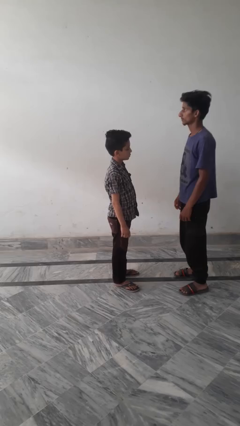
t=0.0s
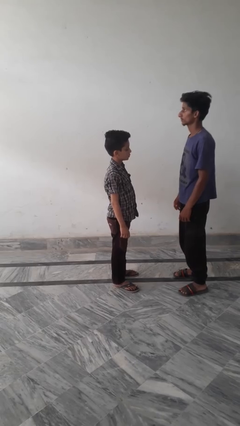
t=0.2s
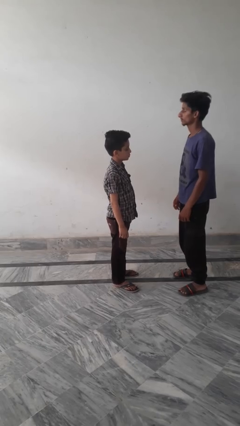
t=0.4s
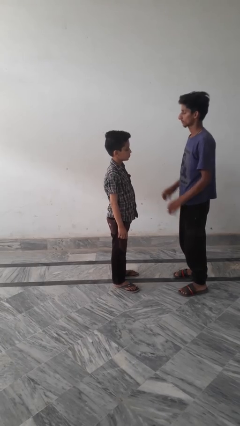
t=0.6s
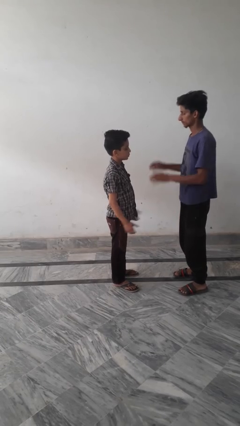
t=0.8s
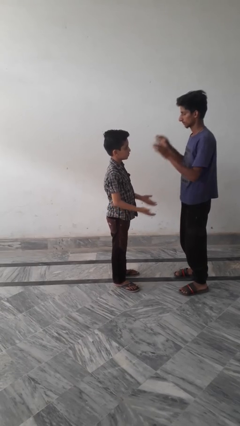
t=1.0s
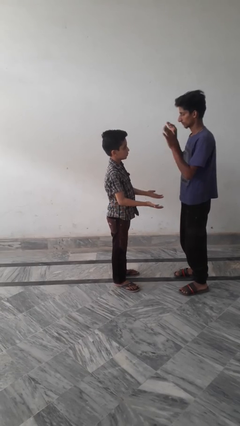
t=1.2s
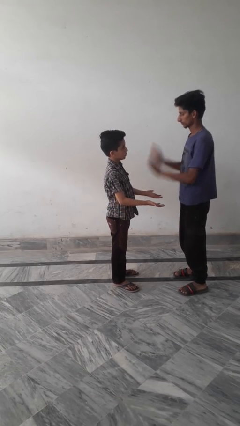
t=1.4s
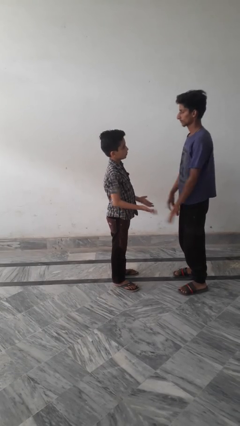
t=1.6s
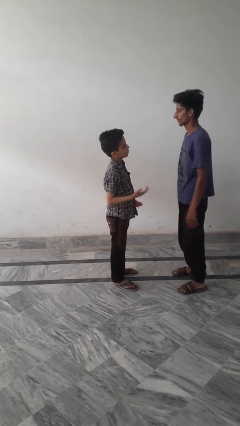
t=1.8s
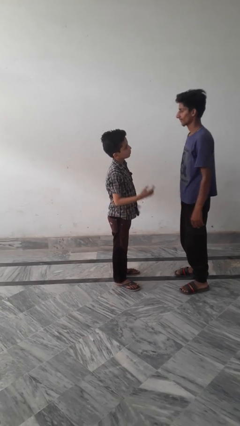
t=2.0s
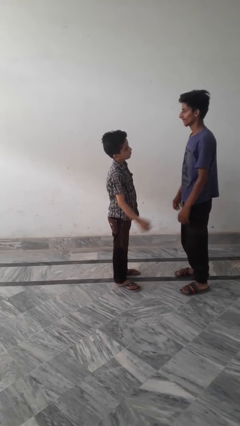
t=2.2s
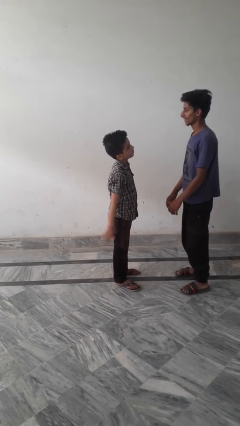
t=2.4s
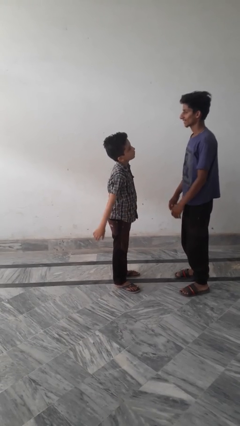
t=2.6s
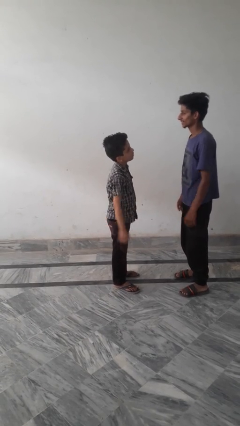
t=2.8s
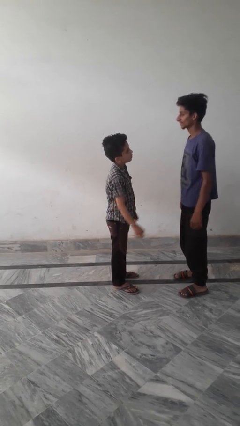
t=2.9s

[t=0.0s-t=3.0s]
person highfives hand

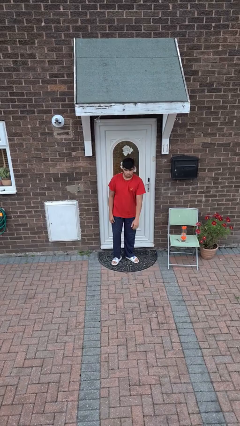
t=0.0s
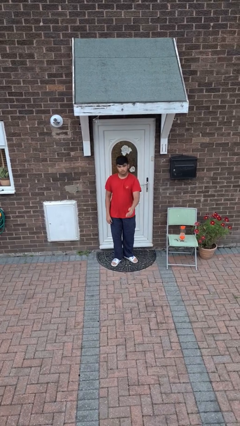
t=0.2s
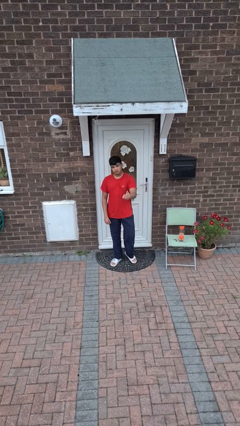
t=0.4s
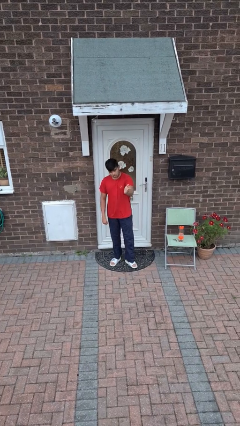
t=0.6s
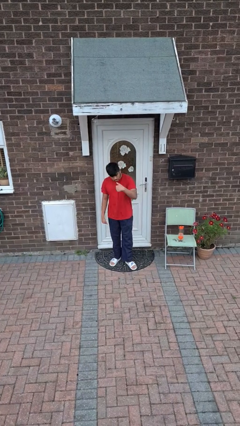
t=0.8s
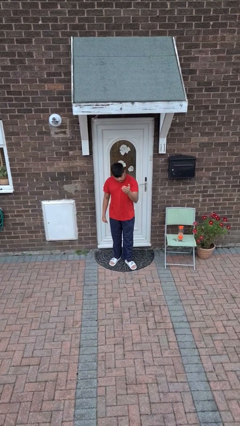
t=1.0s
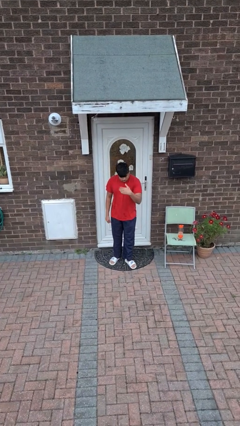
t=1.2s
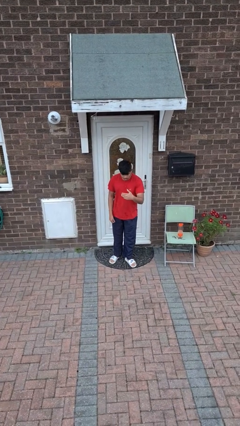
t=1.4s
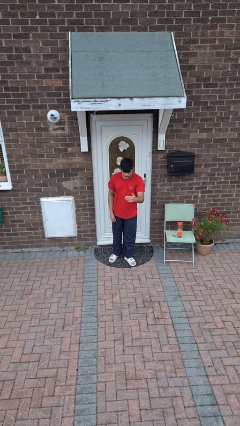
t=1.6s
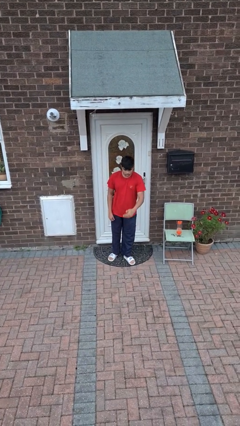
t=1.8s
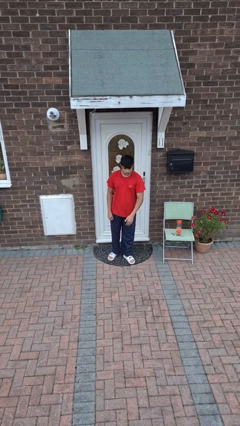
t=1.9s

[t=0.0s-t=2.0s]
person gestures come here

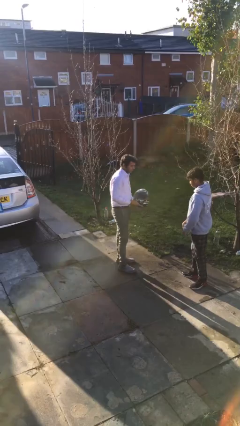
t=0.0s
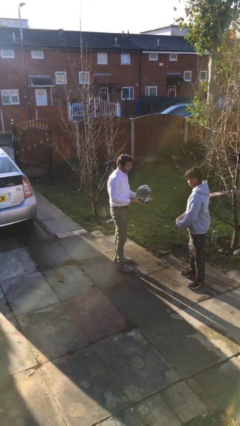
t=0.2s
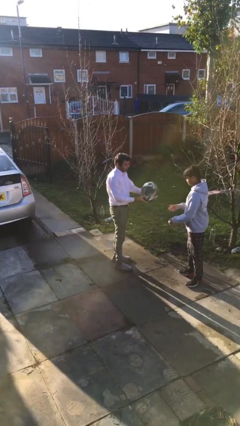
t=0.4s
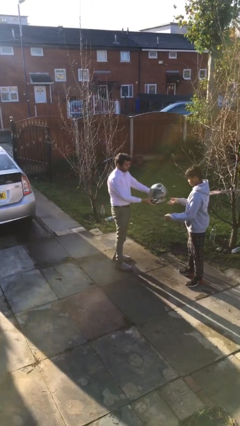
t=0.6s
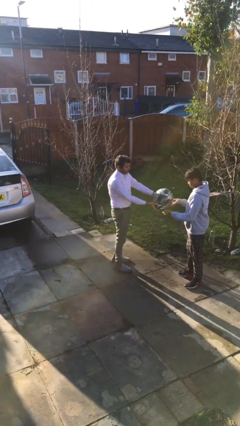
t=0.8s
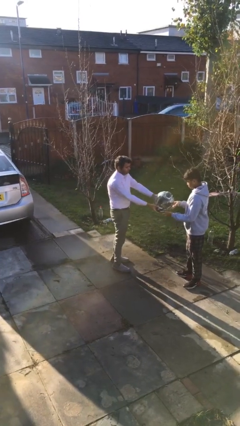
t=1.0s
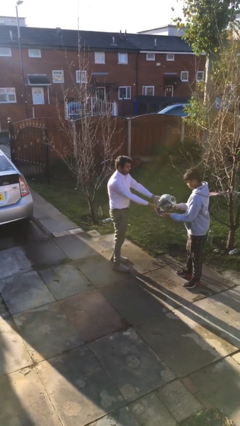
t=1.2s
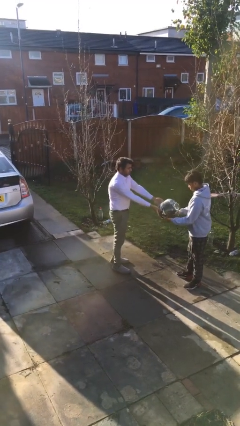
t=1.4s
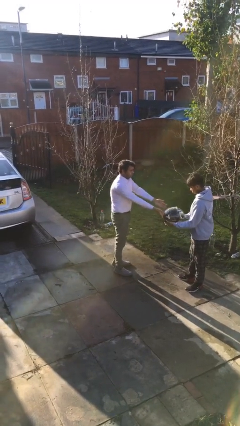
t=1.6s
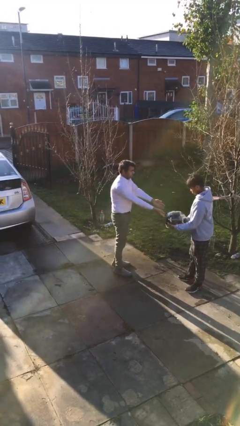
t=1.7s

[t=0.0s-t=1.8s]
person transfers object to person

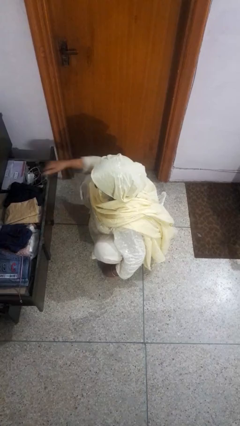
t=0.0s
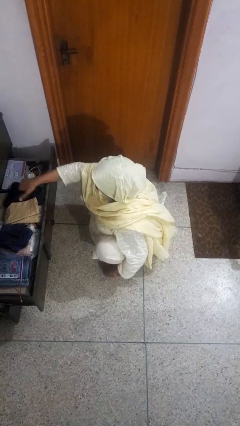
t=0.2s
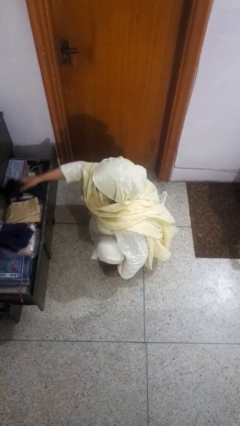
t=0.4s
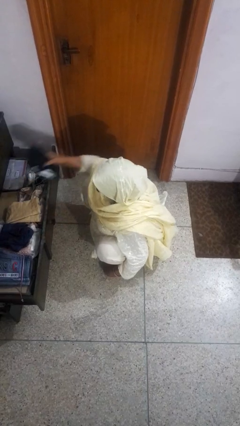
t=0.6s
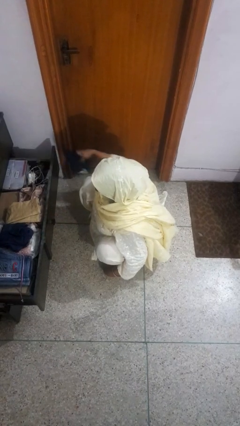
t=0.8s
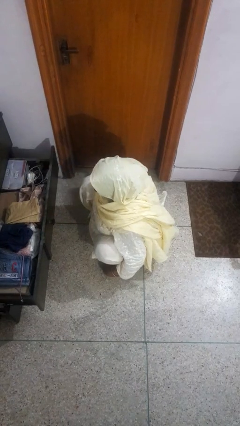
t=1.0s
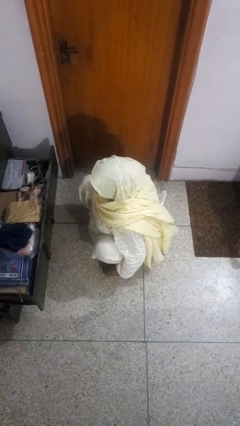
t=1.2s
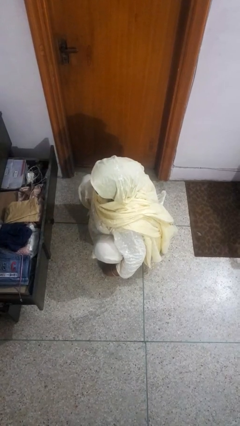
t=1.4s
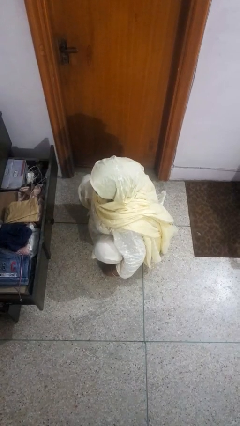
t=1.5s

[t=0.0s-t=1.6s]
person takes clothes from dresser

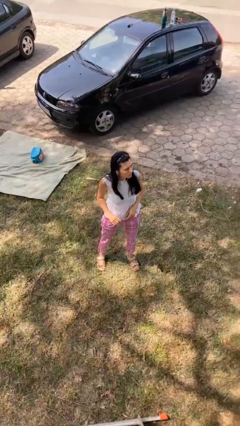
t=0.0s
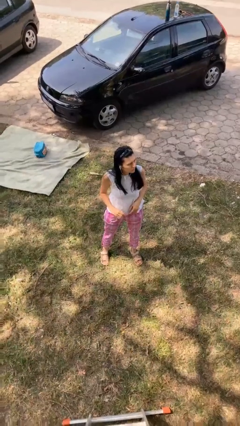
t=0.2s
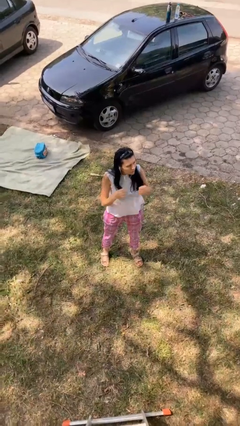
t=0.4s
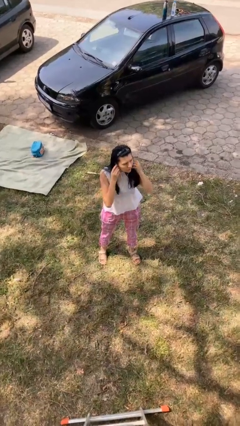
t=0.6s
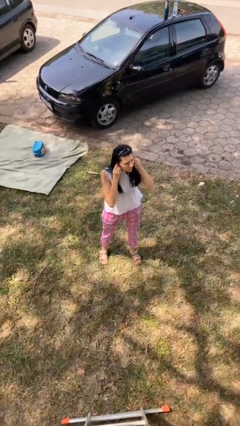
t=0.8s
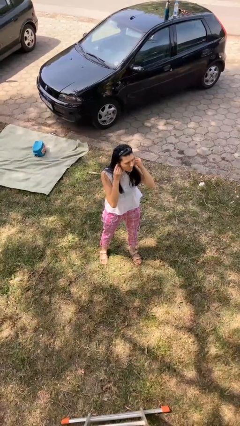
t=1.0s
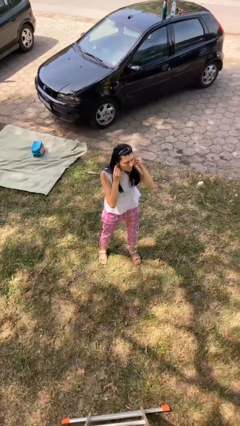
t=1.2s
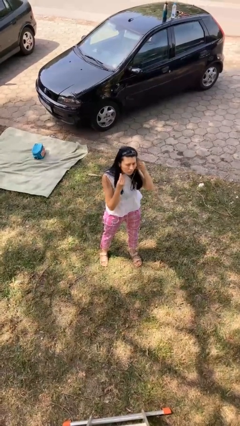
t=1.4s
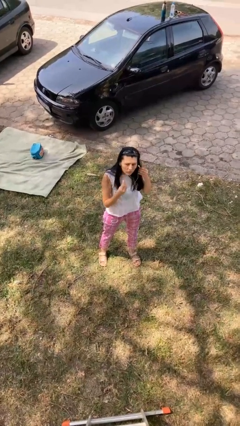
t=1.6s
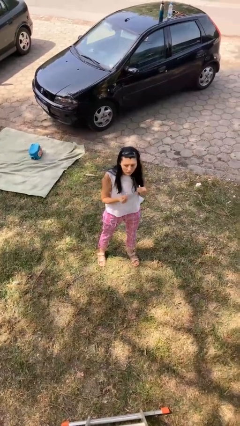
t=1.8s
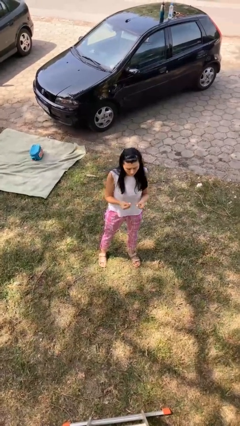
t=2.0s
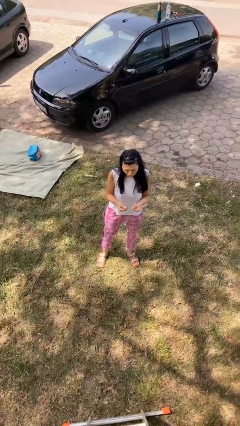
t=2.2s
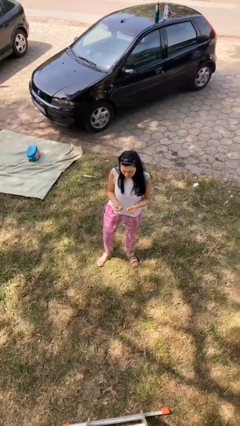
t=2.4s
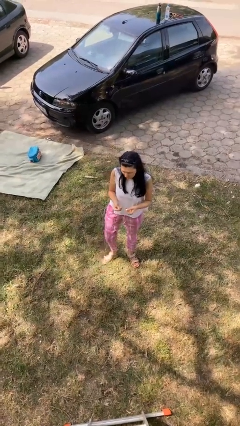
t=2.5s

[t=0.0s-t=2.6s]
person takes off headphones

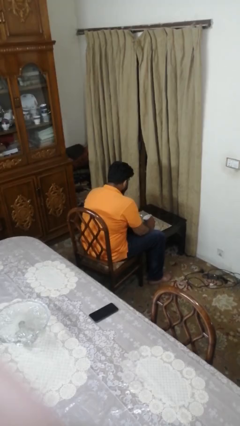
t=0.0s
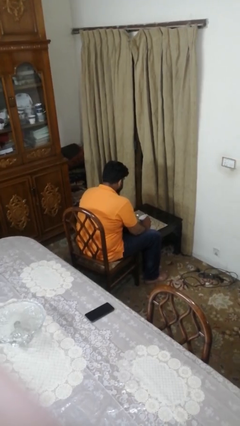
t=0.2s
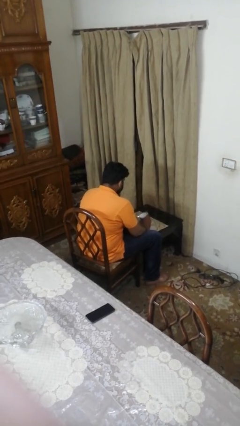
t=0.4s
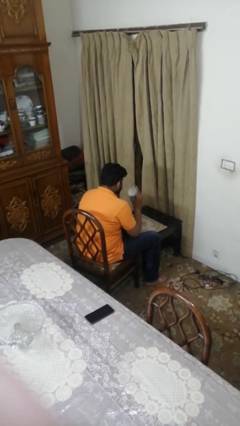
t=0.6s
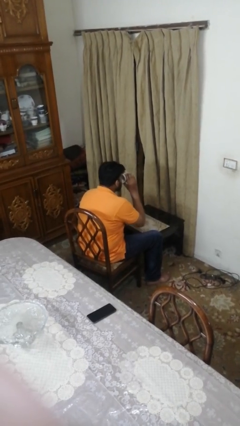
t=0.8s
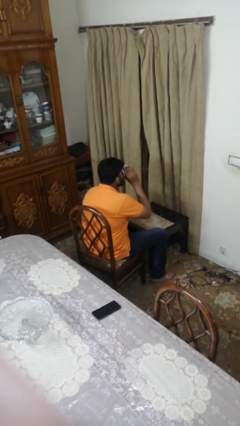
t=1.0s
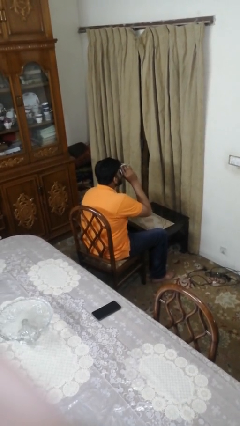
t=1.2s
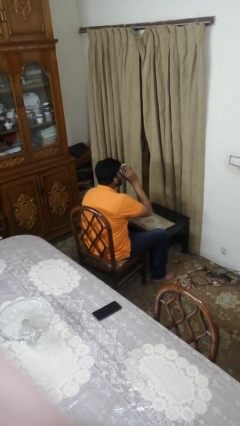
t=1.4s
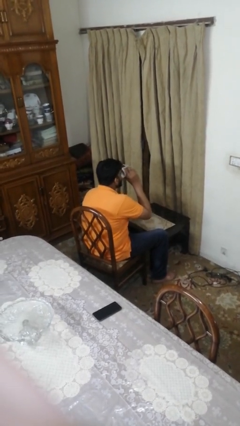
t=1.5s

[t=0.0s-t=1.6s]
person drinks from mug

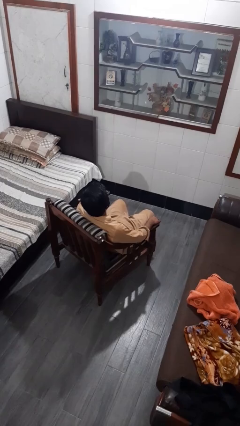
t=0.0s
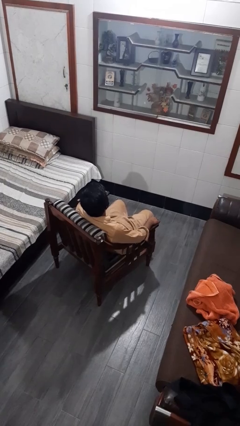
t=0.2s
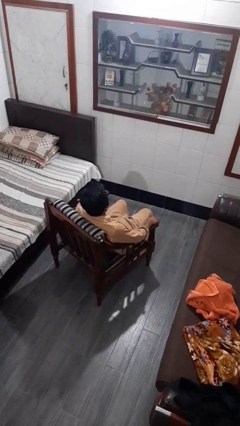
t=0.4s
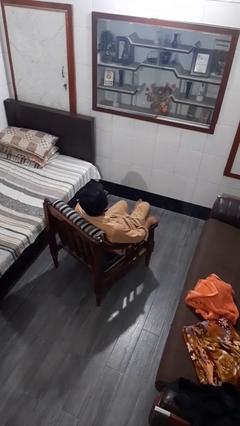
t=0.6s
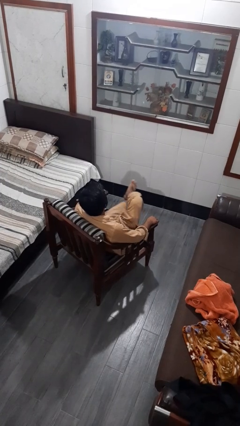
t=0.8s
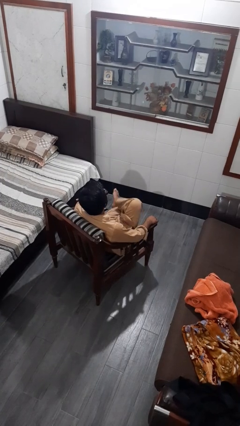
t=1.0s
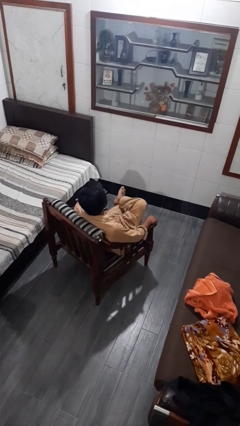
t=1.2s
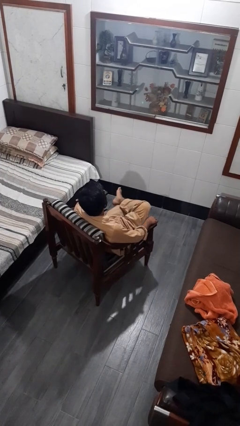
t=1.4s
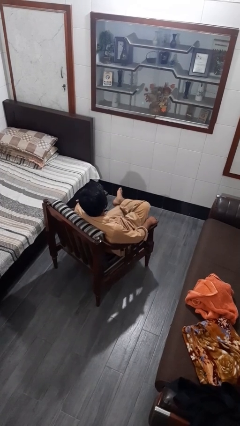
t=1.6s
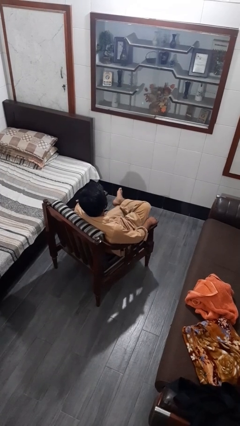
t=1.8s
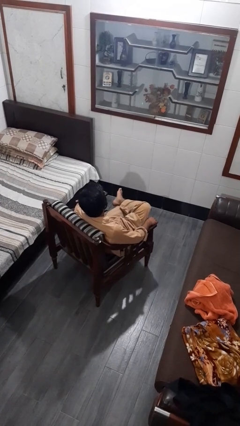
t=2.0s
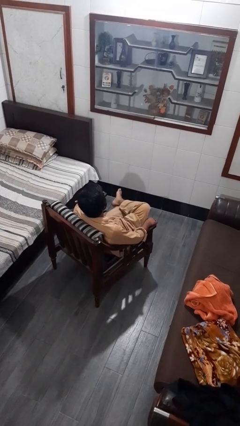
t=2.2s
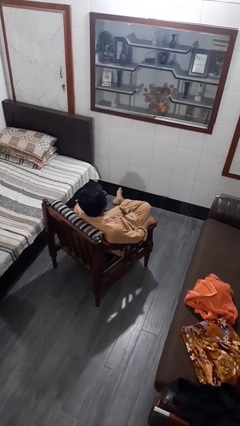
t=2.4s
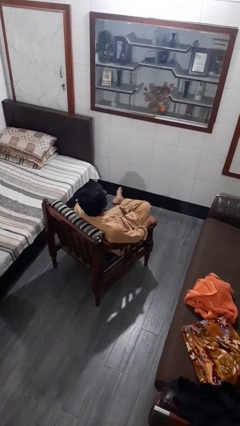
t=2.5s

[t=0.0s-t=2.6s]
person crosses legs

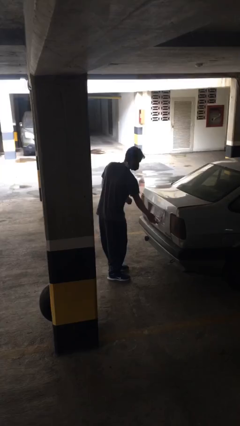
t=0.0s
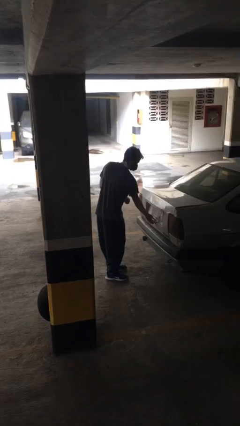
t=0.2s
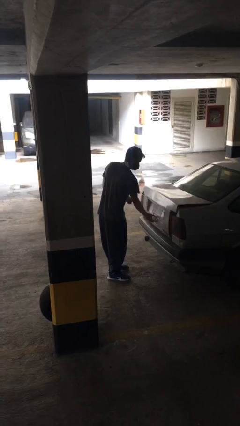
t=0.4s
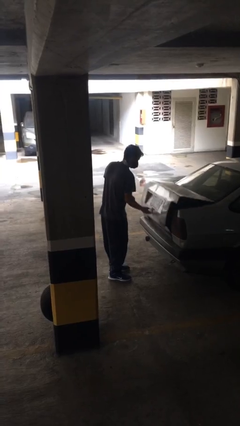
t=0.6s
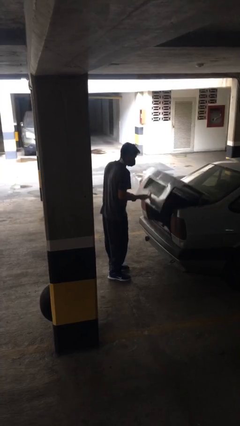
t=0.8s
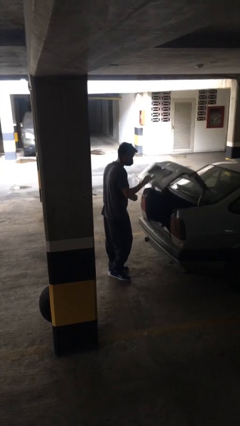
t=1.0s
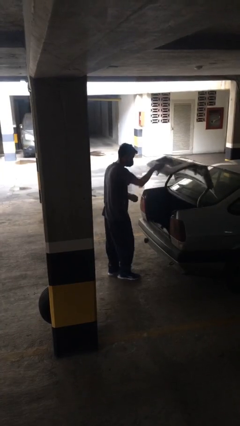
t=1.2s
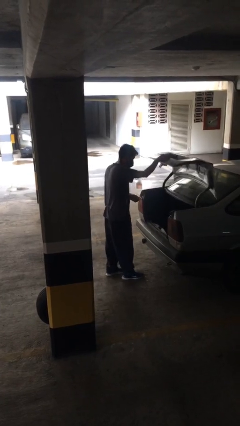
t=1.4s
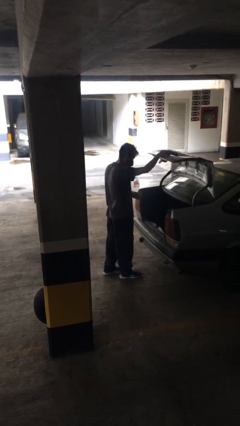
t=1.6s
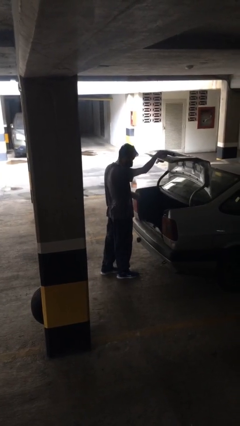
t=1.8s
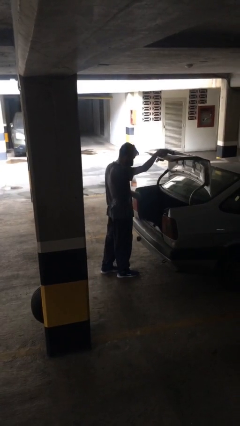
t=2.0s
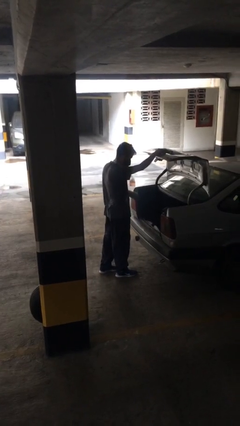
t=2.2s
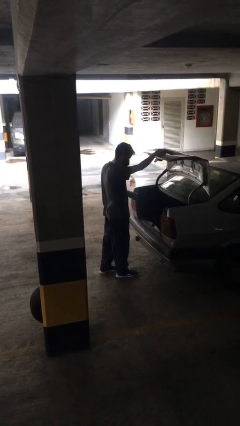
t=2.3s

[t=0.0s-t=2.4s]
person opens car trunk
